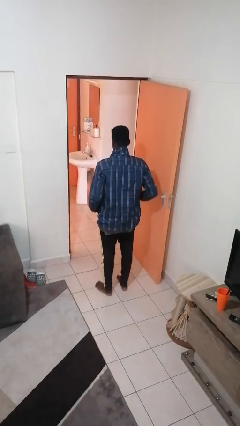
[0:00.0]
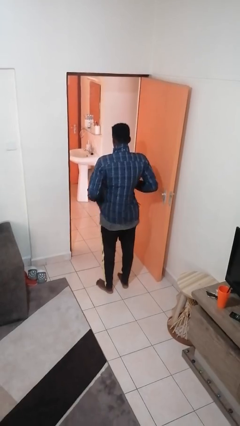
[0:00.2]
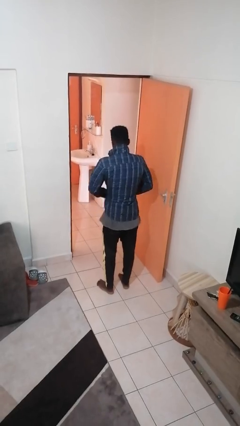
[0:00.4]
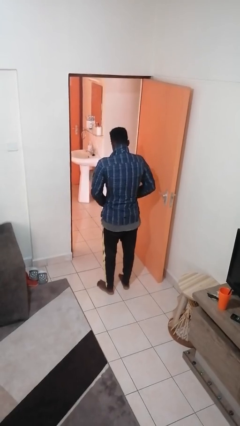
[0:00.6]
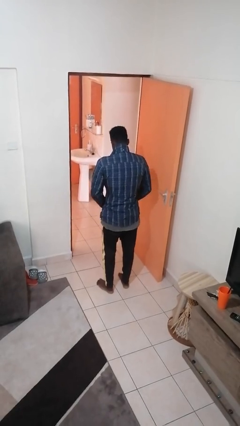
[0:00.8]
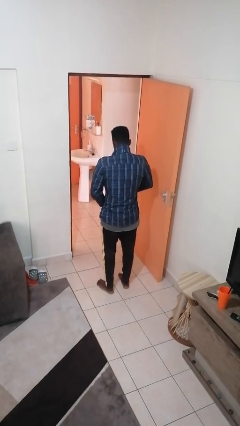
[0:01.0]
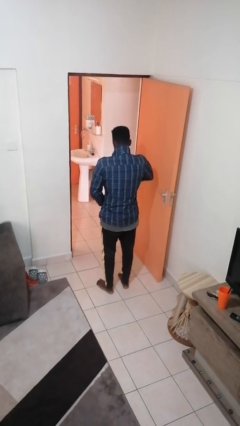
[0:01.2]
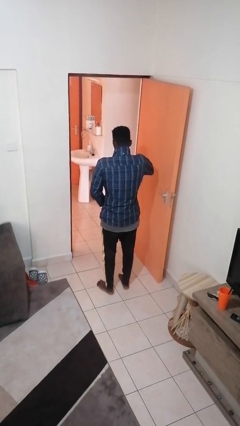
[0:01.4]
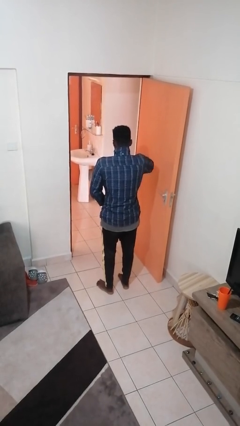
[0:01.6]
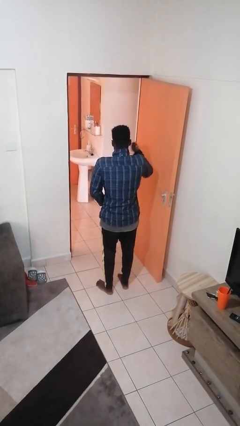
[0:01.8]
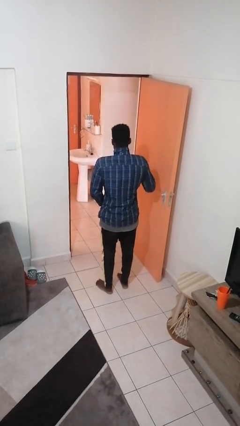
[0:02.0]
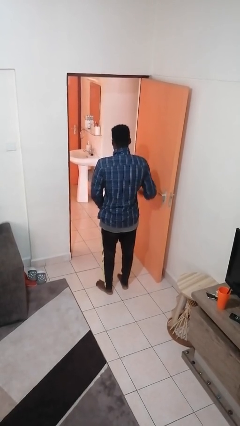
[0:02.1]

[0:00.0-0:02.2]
person zips up jacket

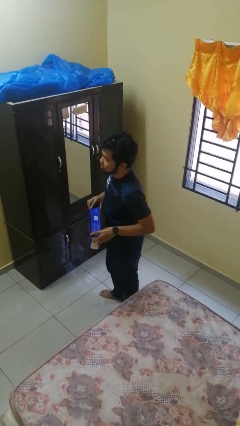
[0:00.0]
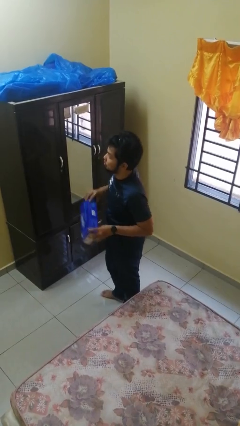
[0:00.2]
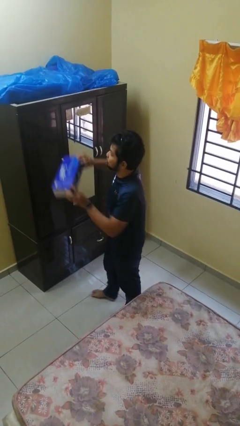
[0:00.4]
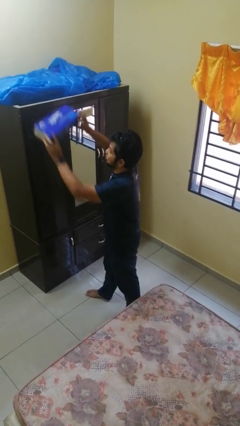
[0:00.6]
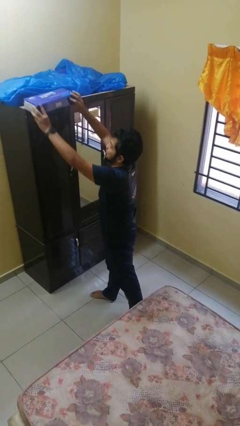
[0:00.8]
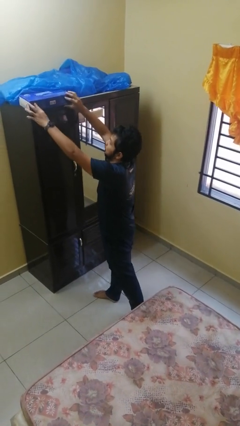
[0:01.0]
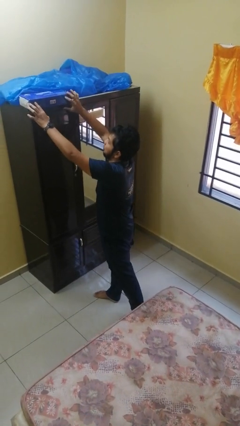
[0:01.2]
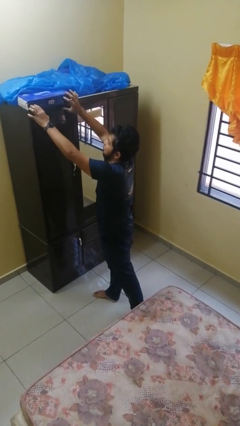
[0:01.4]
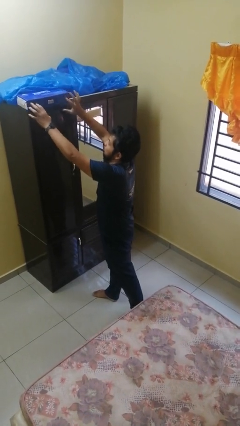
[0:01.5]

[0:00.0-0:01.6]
person puts down object on countertop

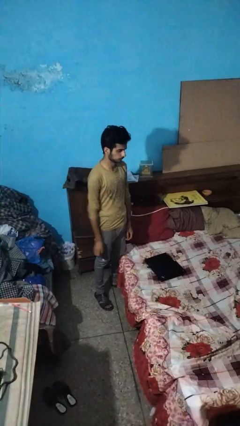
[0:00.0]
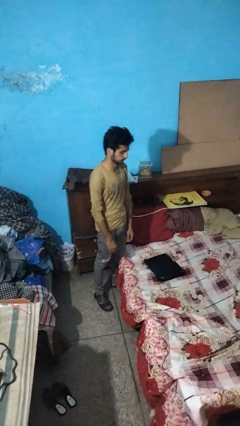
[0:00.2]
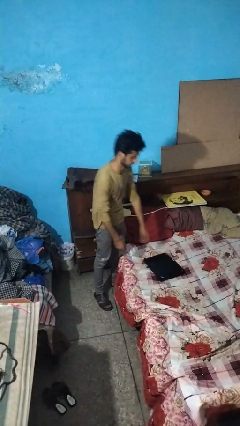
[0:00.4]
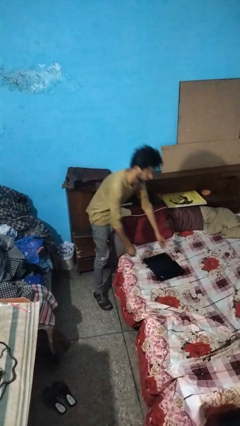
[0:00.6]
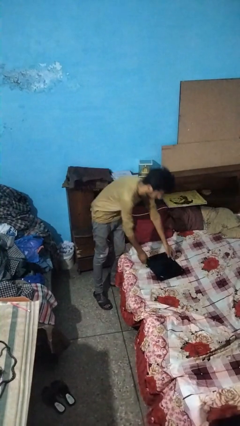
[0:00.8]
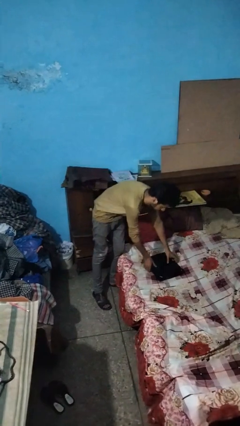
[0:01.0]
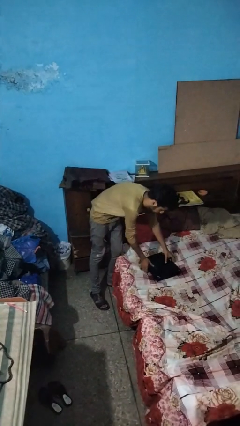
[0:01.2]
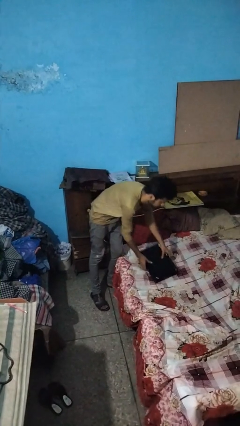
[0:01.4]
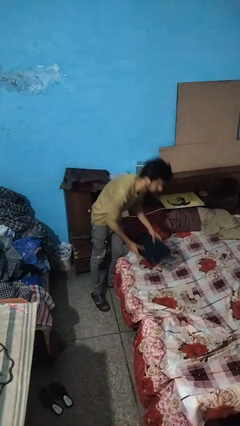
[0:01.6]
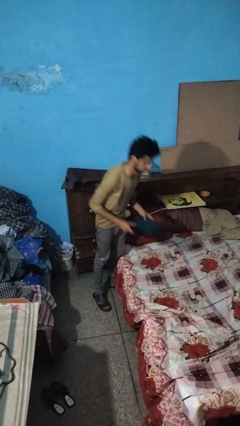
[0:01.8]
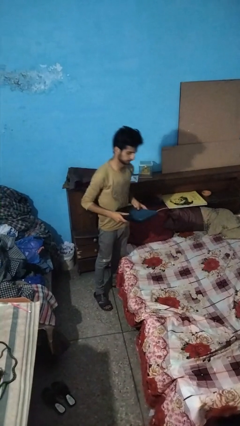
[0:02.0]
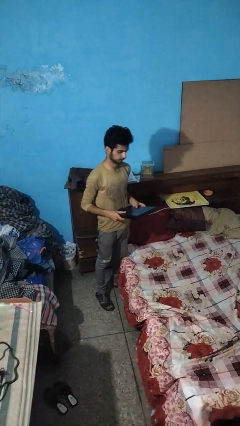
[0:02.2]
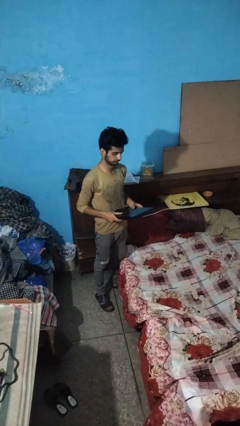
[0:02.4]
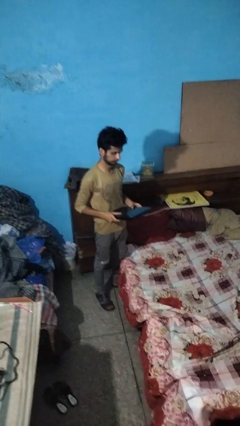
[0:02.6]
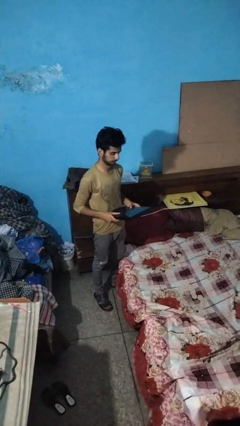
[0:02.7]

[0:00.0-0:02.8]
person picks up object from bed

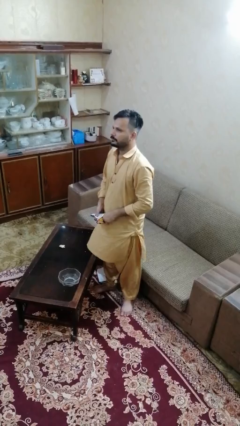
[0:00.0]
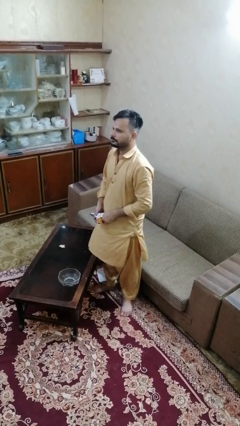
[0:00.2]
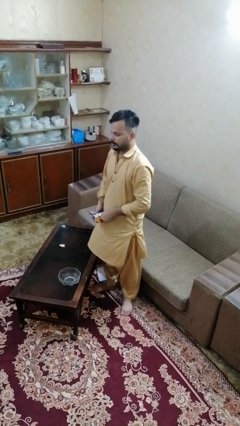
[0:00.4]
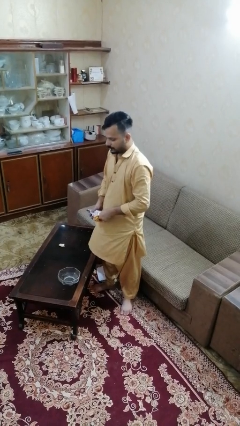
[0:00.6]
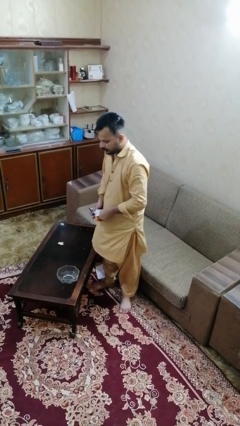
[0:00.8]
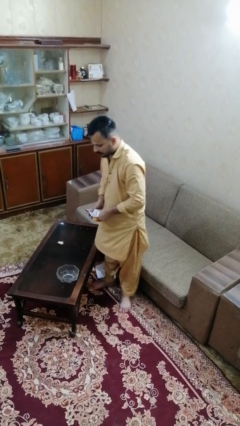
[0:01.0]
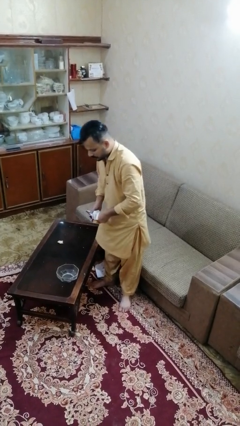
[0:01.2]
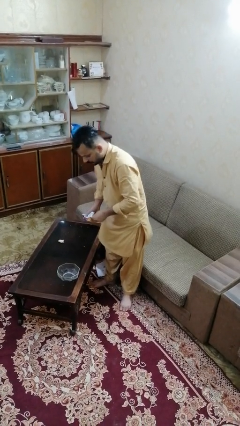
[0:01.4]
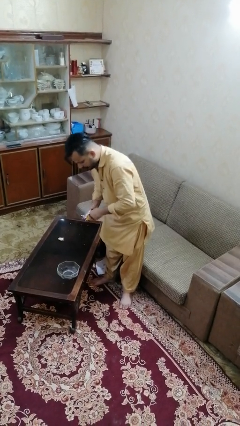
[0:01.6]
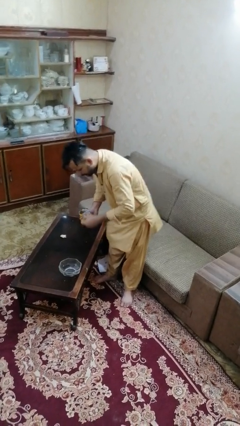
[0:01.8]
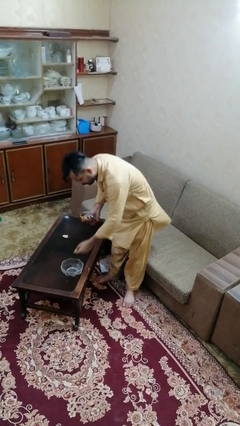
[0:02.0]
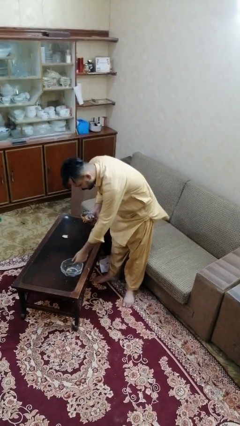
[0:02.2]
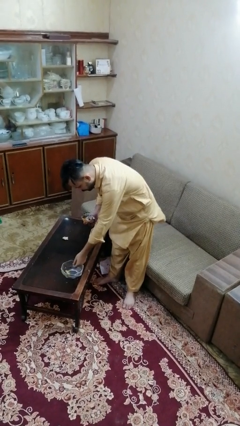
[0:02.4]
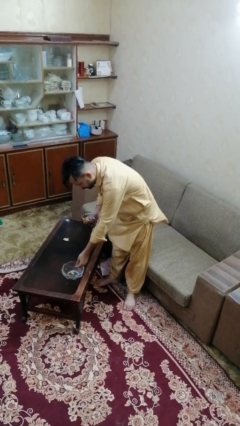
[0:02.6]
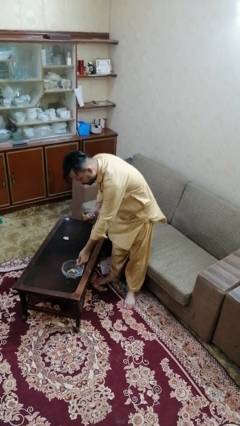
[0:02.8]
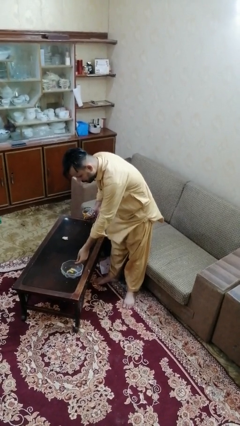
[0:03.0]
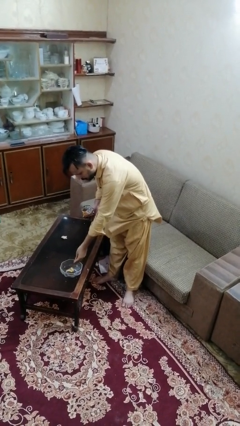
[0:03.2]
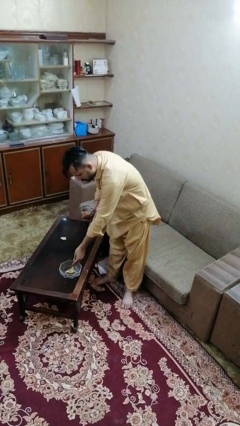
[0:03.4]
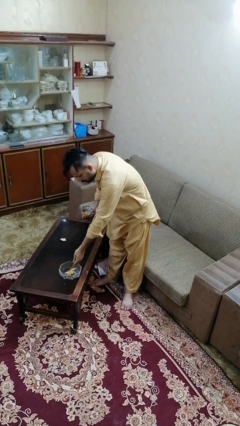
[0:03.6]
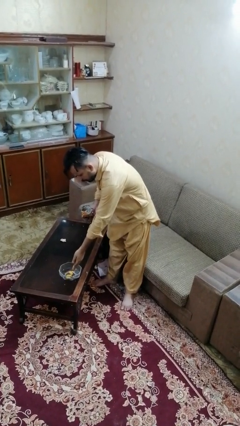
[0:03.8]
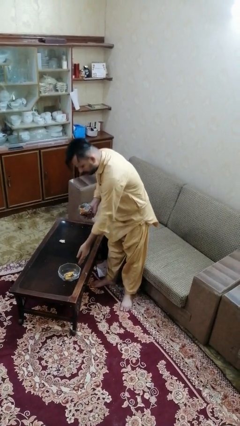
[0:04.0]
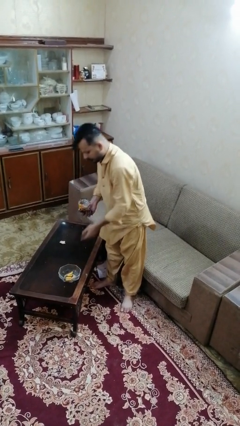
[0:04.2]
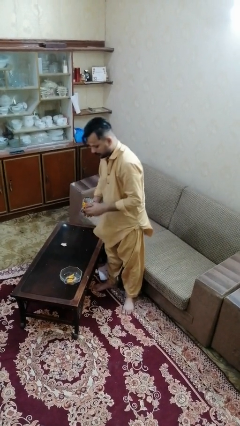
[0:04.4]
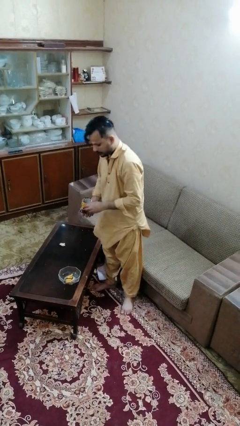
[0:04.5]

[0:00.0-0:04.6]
person pours into bowl

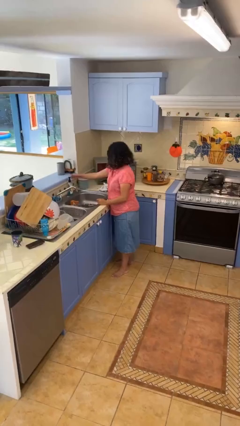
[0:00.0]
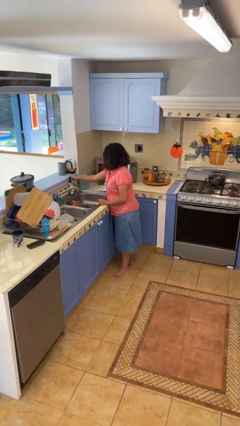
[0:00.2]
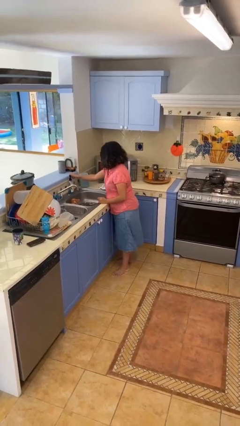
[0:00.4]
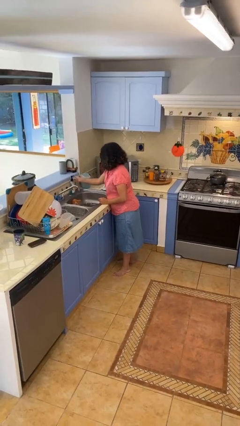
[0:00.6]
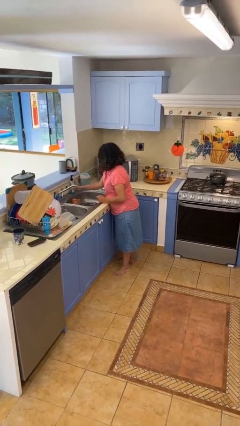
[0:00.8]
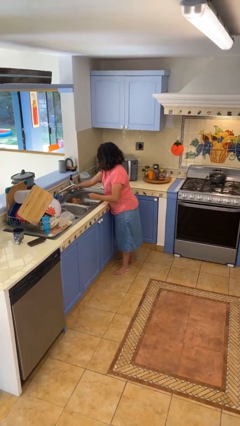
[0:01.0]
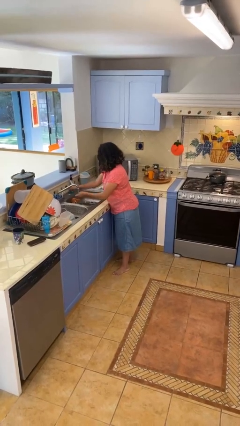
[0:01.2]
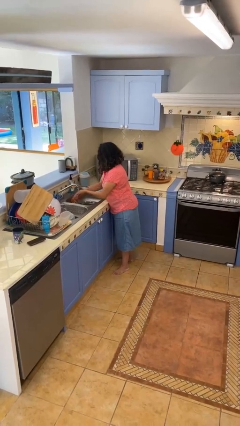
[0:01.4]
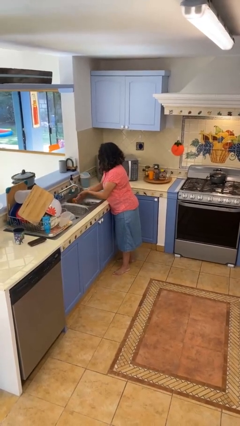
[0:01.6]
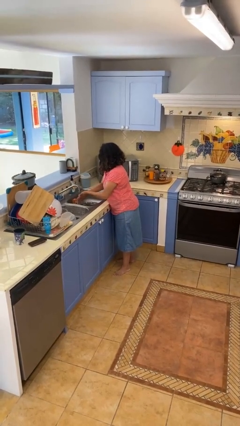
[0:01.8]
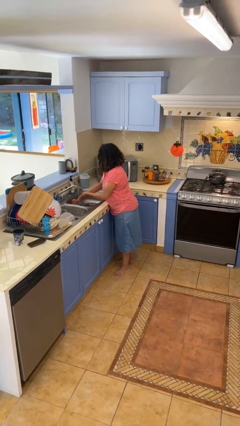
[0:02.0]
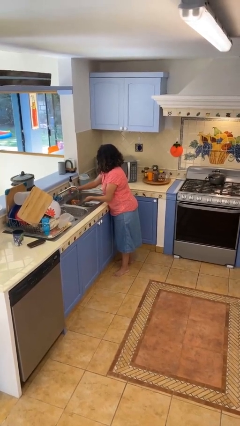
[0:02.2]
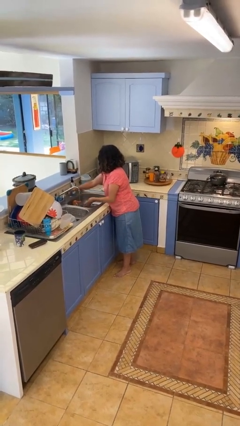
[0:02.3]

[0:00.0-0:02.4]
person washes hands

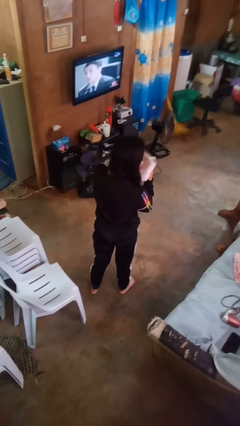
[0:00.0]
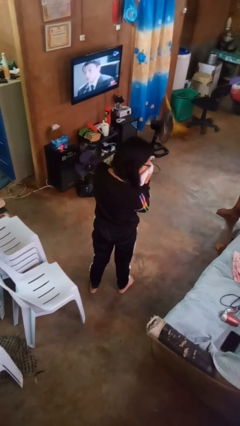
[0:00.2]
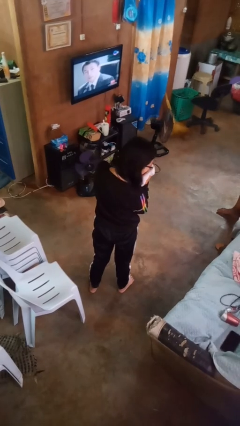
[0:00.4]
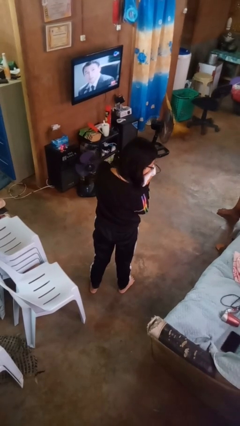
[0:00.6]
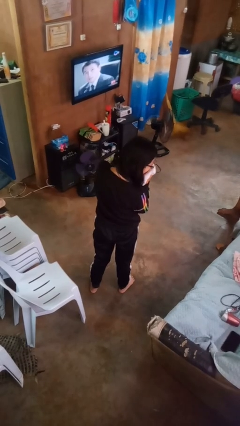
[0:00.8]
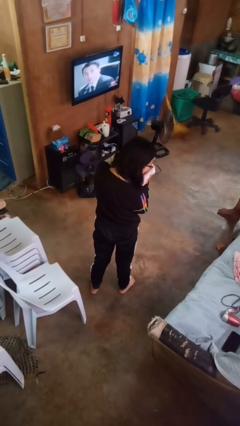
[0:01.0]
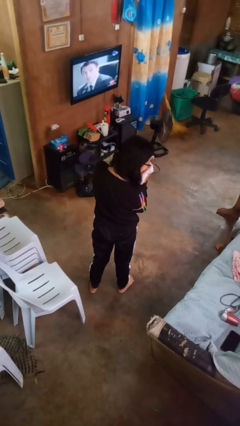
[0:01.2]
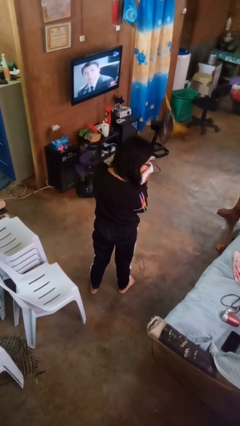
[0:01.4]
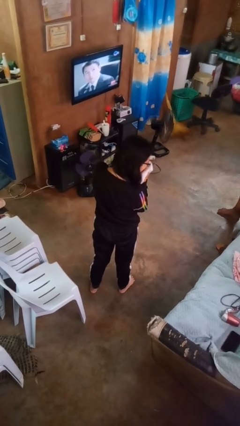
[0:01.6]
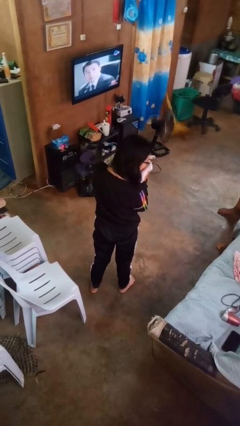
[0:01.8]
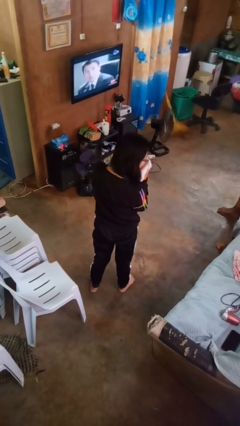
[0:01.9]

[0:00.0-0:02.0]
person blows nose

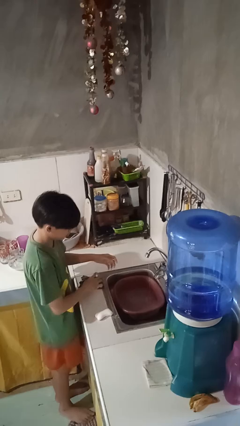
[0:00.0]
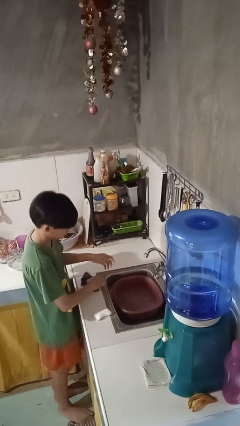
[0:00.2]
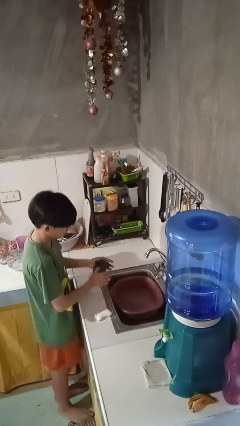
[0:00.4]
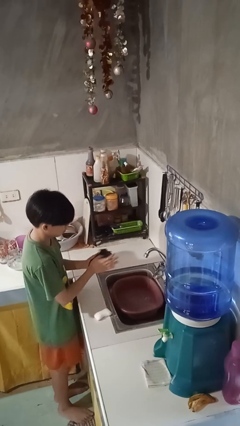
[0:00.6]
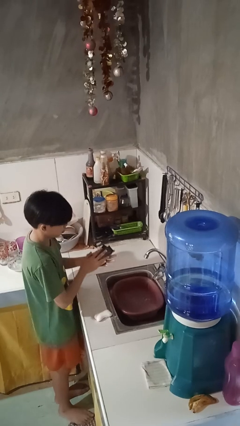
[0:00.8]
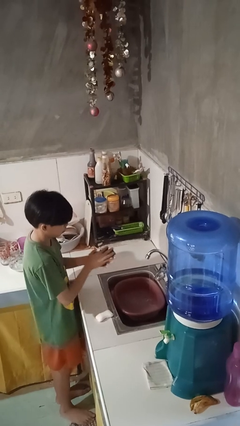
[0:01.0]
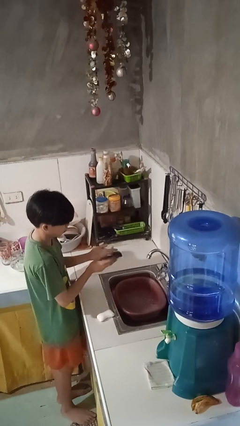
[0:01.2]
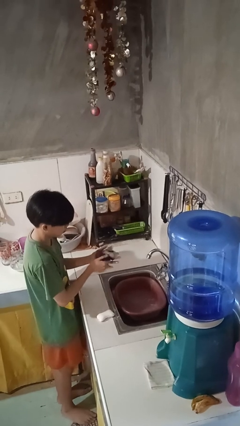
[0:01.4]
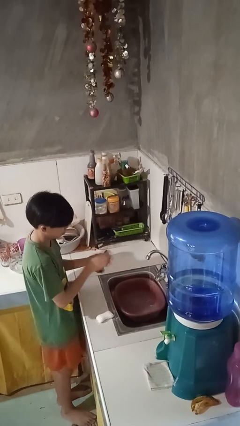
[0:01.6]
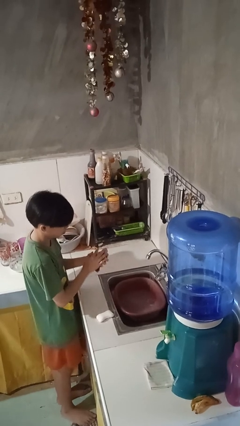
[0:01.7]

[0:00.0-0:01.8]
person dries hands with towel
